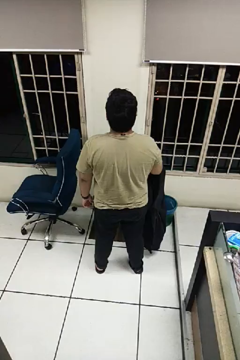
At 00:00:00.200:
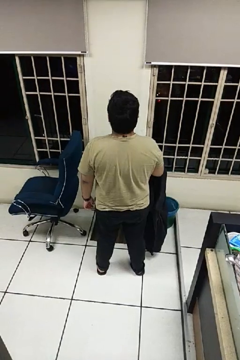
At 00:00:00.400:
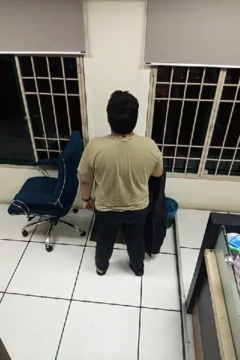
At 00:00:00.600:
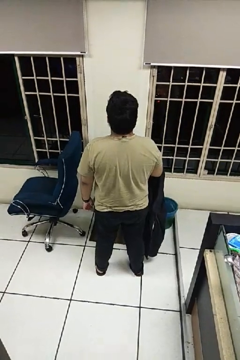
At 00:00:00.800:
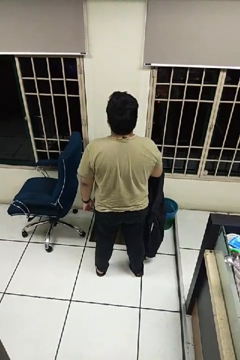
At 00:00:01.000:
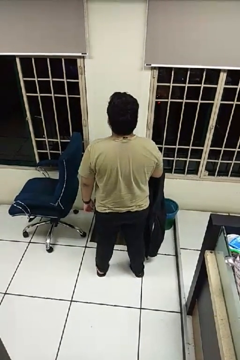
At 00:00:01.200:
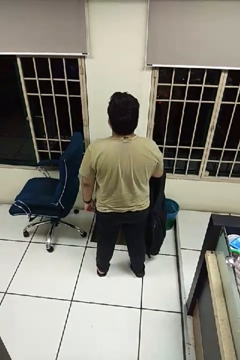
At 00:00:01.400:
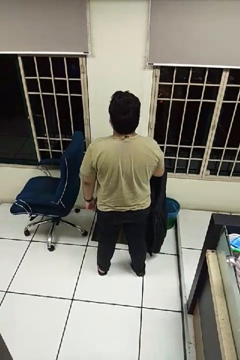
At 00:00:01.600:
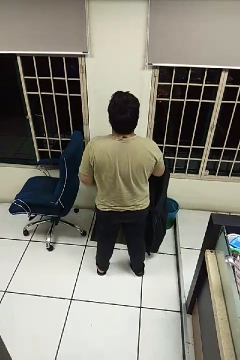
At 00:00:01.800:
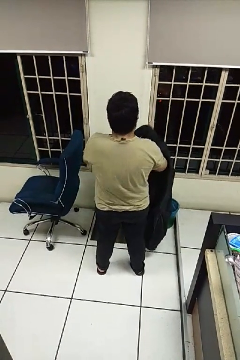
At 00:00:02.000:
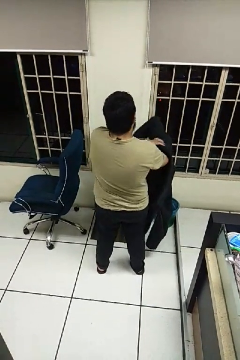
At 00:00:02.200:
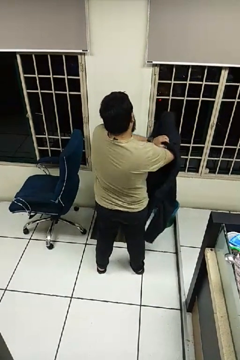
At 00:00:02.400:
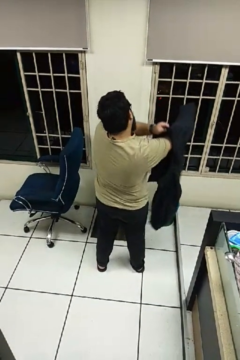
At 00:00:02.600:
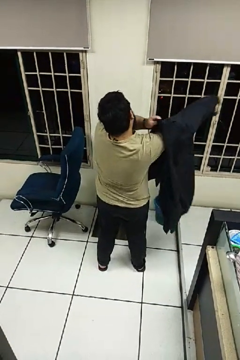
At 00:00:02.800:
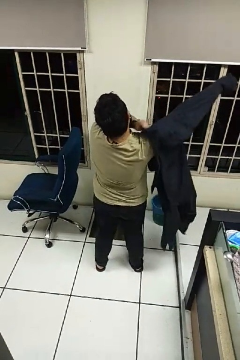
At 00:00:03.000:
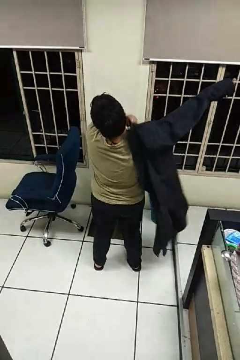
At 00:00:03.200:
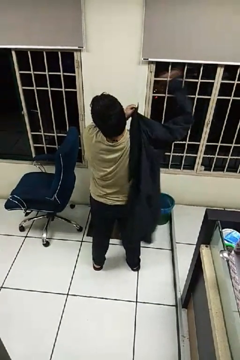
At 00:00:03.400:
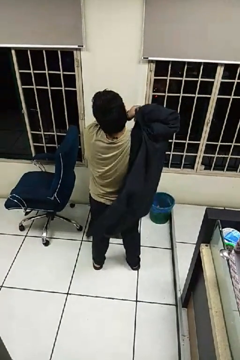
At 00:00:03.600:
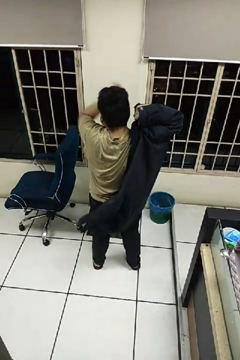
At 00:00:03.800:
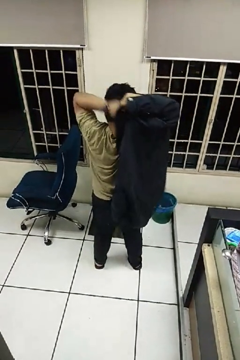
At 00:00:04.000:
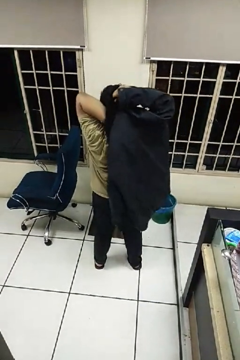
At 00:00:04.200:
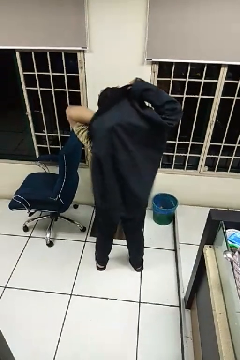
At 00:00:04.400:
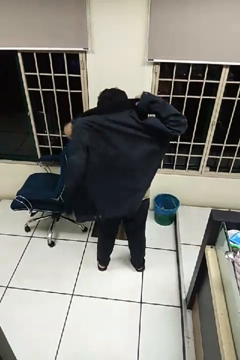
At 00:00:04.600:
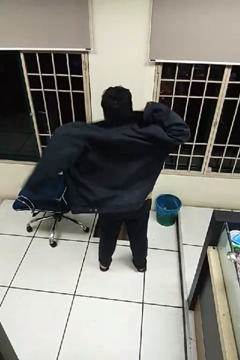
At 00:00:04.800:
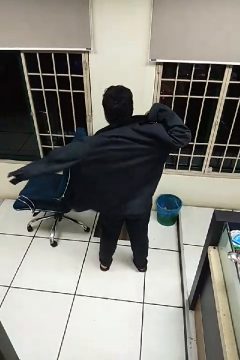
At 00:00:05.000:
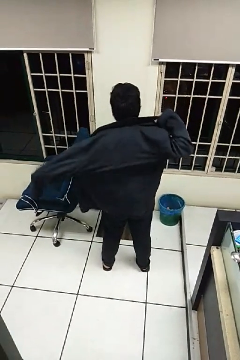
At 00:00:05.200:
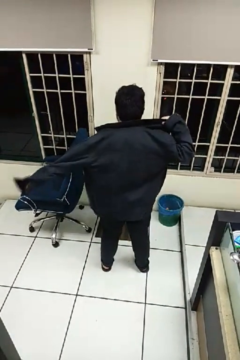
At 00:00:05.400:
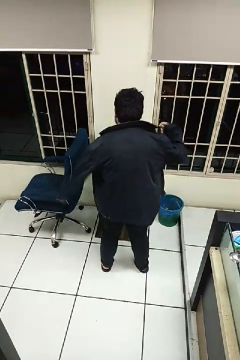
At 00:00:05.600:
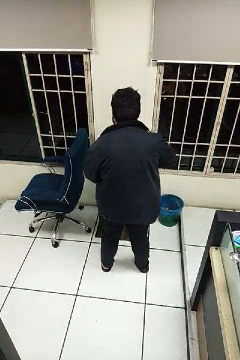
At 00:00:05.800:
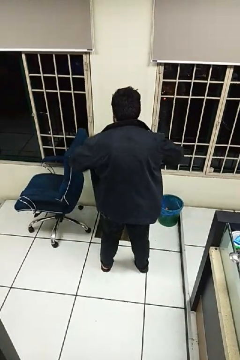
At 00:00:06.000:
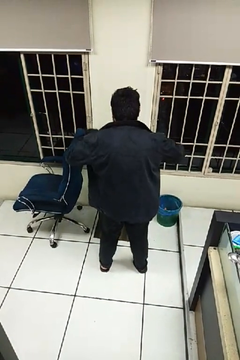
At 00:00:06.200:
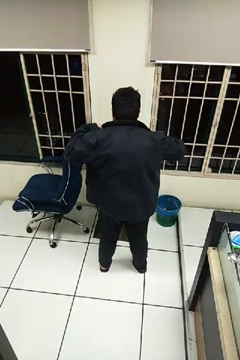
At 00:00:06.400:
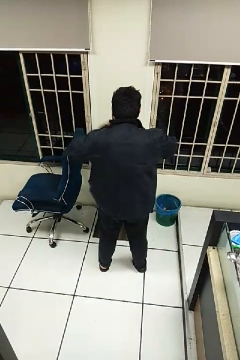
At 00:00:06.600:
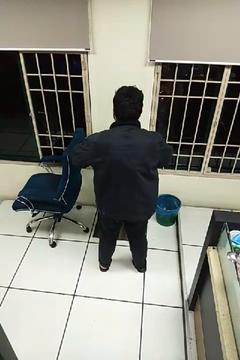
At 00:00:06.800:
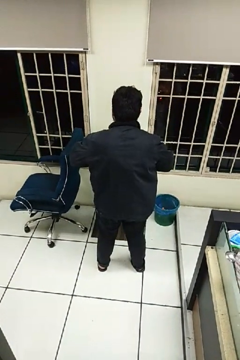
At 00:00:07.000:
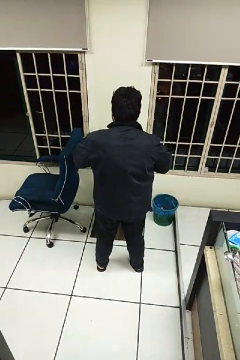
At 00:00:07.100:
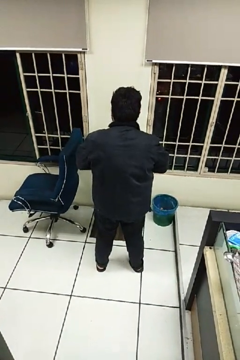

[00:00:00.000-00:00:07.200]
person puts on shirt

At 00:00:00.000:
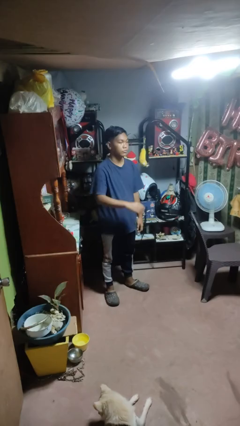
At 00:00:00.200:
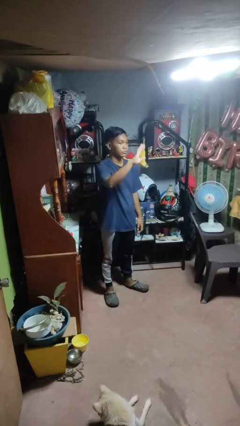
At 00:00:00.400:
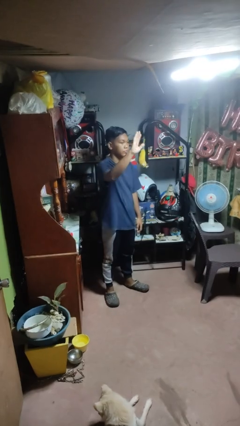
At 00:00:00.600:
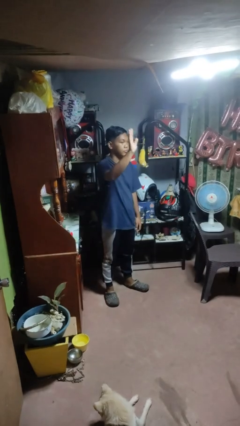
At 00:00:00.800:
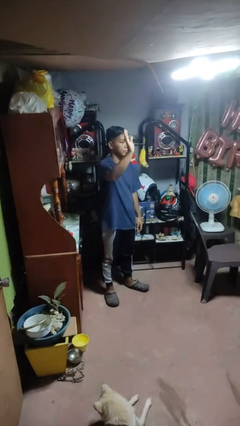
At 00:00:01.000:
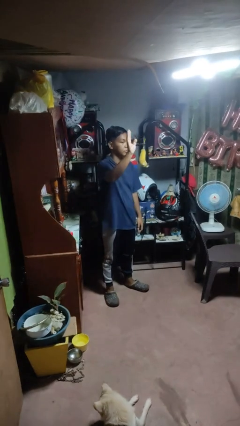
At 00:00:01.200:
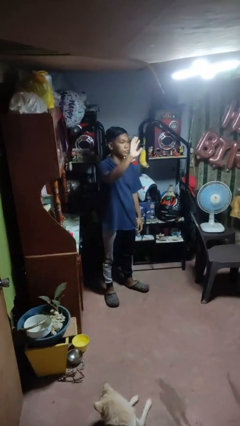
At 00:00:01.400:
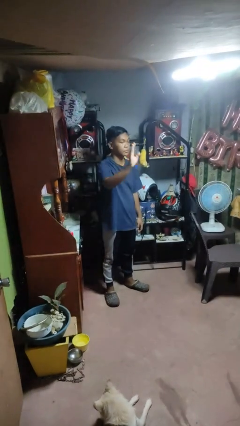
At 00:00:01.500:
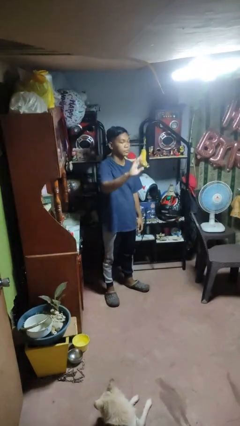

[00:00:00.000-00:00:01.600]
person waves at person

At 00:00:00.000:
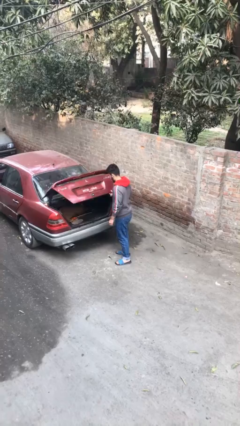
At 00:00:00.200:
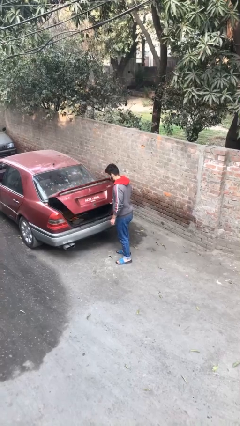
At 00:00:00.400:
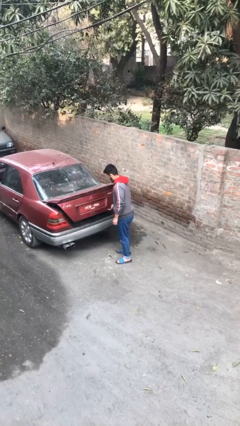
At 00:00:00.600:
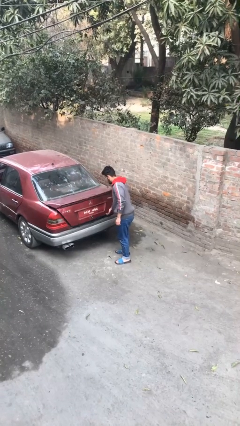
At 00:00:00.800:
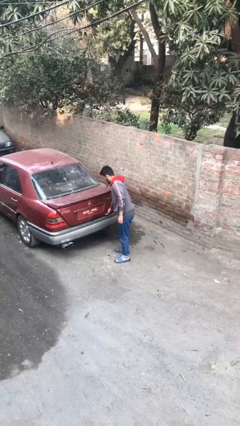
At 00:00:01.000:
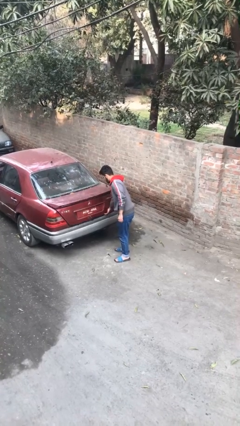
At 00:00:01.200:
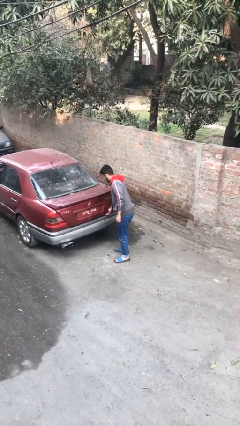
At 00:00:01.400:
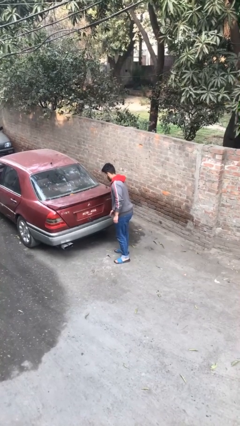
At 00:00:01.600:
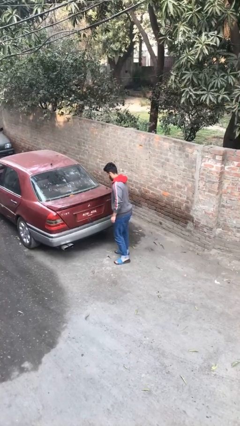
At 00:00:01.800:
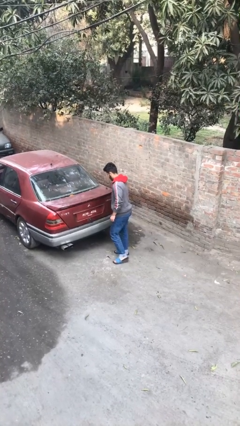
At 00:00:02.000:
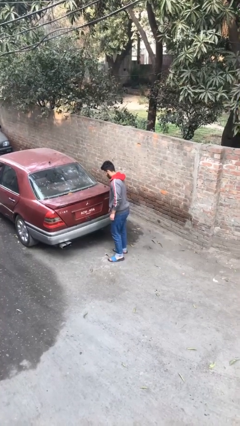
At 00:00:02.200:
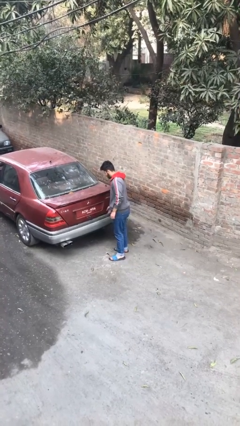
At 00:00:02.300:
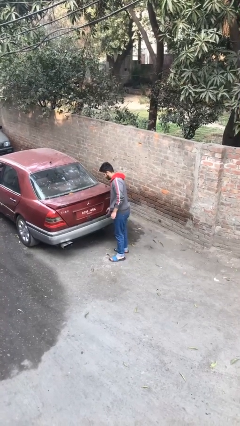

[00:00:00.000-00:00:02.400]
person closes car trunk

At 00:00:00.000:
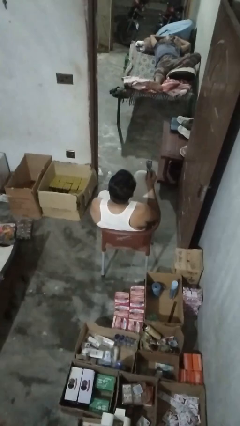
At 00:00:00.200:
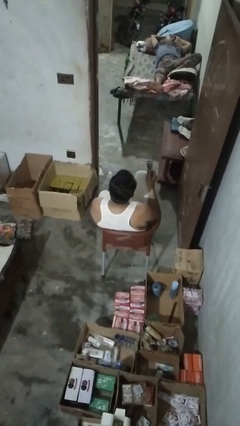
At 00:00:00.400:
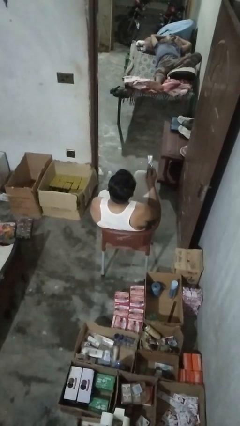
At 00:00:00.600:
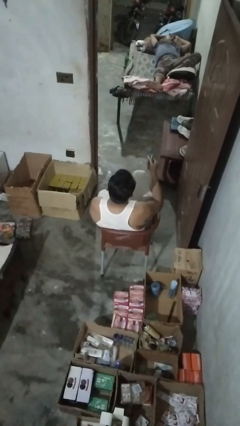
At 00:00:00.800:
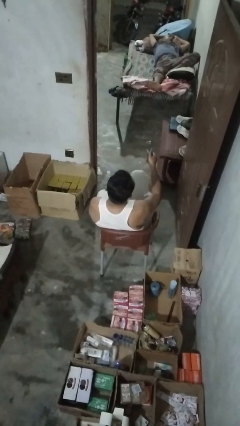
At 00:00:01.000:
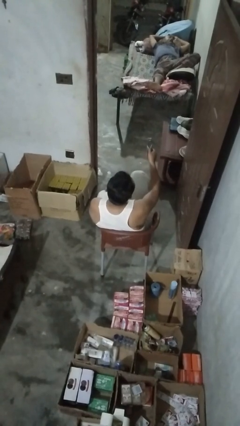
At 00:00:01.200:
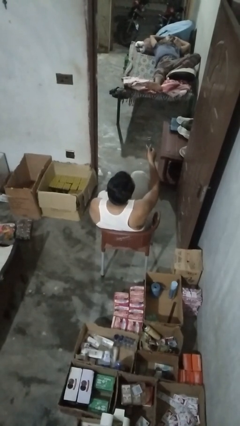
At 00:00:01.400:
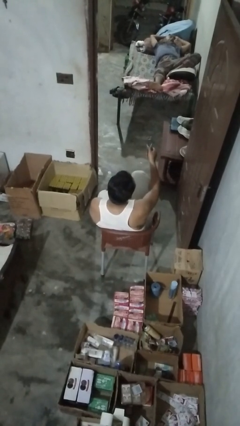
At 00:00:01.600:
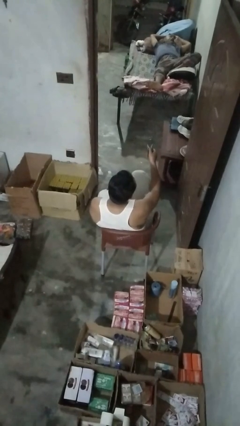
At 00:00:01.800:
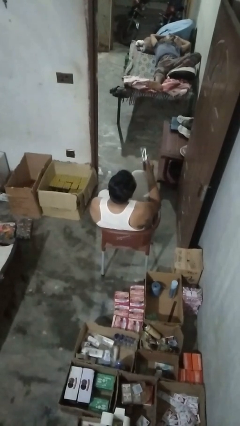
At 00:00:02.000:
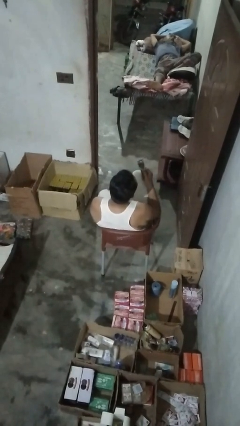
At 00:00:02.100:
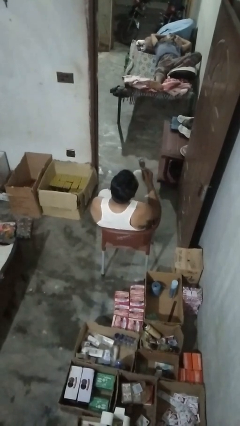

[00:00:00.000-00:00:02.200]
person uses television remote

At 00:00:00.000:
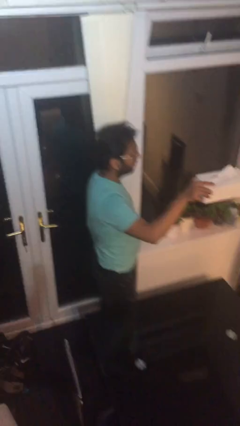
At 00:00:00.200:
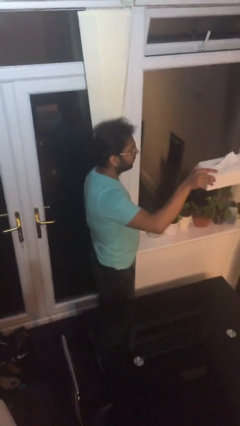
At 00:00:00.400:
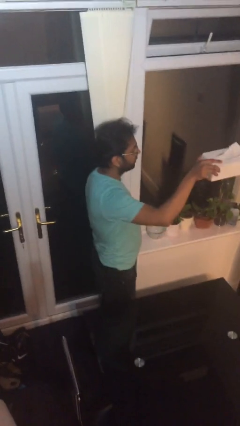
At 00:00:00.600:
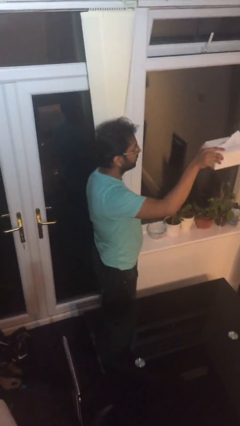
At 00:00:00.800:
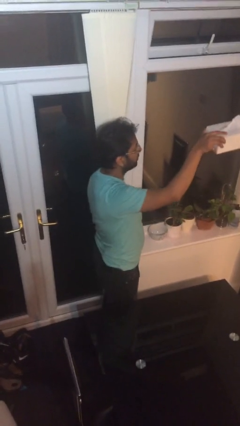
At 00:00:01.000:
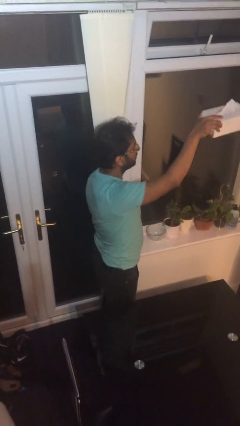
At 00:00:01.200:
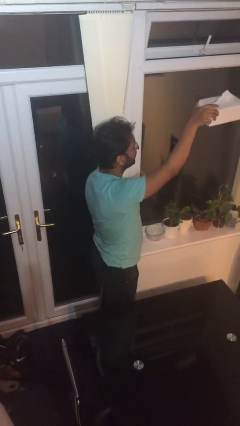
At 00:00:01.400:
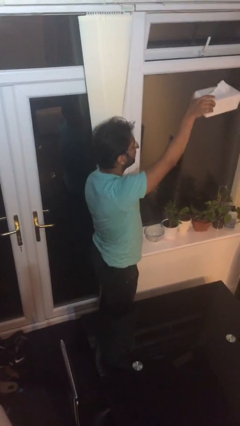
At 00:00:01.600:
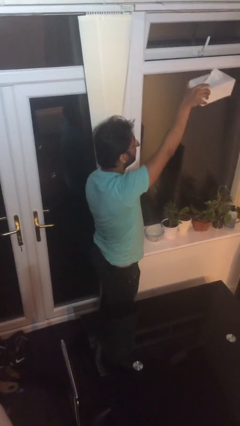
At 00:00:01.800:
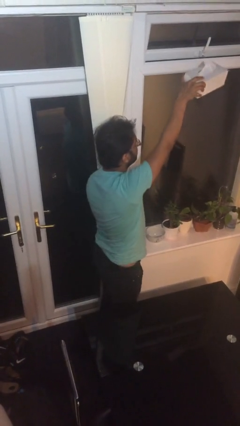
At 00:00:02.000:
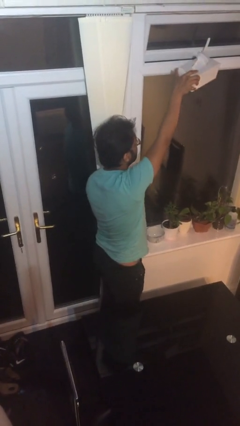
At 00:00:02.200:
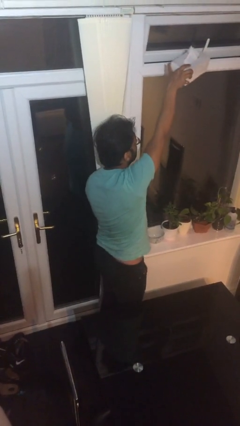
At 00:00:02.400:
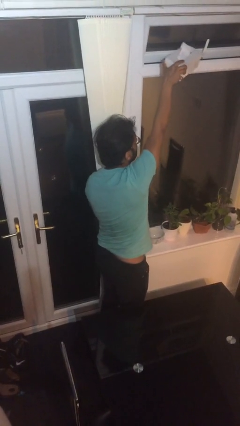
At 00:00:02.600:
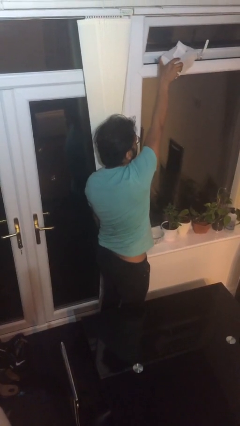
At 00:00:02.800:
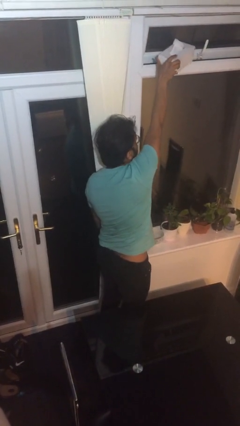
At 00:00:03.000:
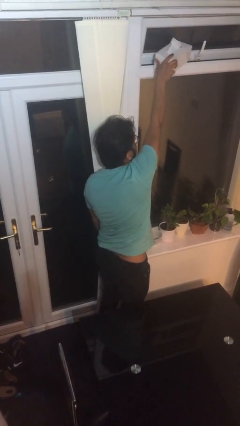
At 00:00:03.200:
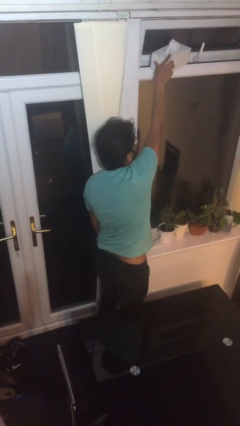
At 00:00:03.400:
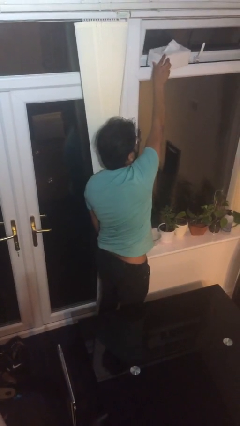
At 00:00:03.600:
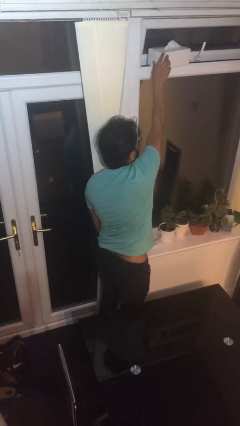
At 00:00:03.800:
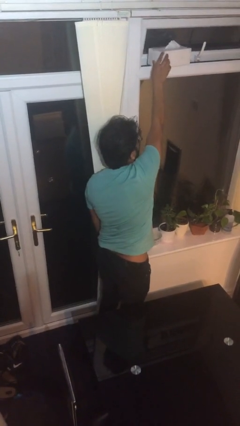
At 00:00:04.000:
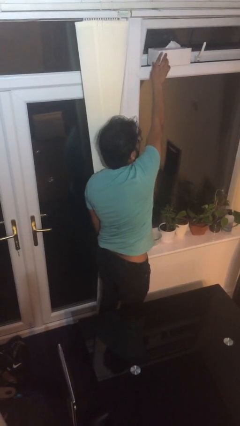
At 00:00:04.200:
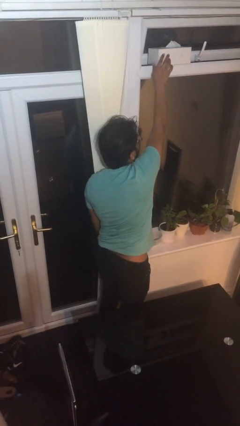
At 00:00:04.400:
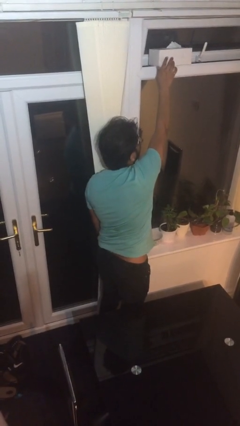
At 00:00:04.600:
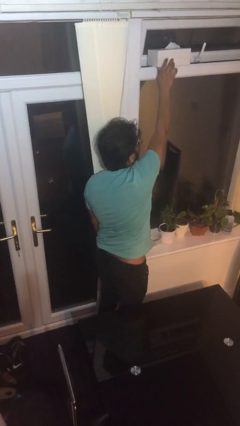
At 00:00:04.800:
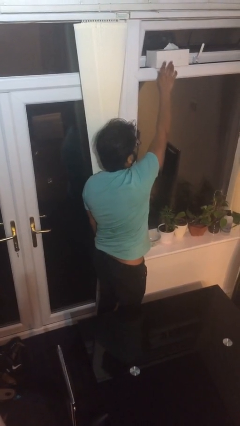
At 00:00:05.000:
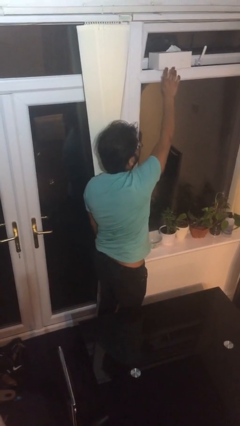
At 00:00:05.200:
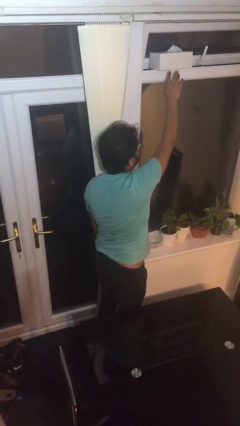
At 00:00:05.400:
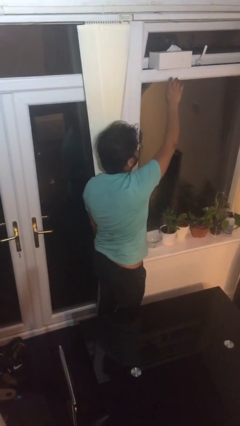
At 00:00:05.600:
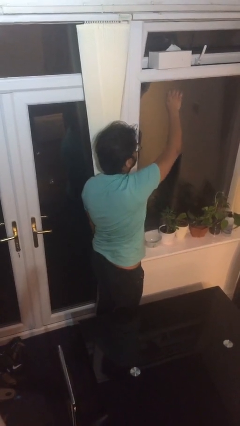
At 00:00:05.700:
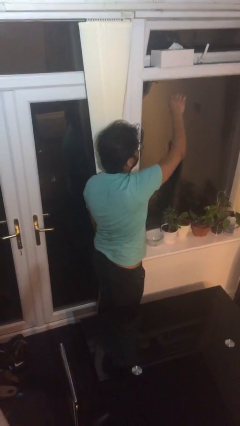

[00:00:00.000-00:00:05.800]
person puts down object on shelf
